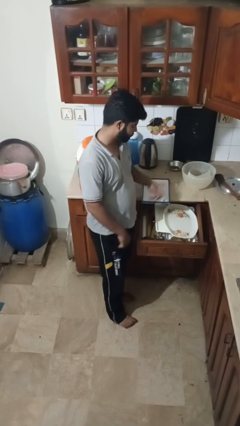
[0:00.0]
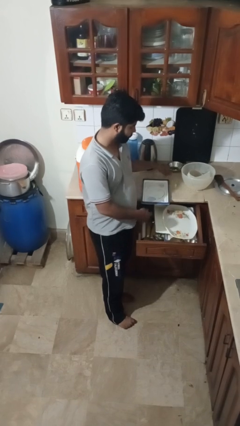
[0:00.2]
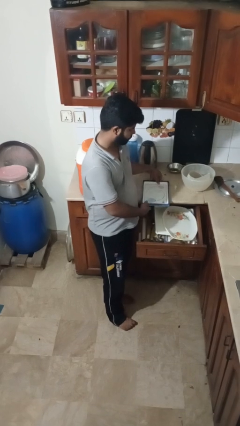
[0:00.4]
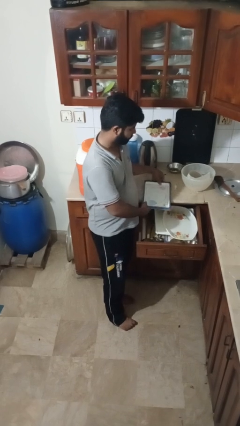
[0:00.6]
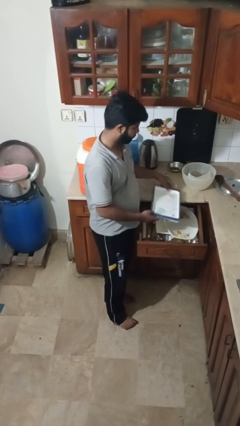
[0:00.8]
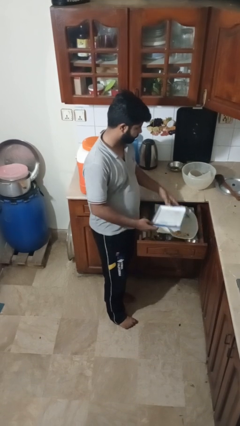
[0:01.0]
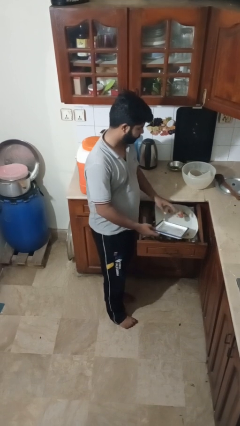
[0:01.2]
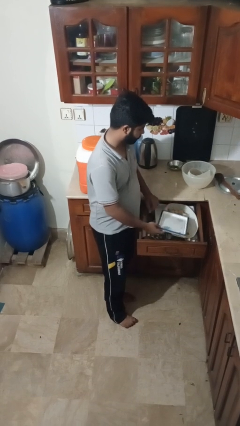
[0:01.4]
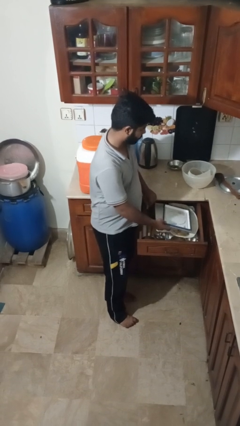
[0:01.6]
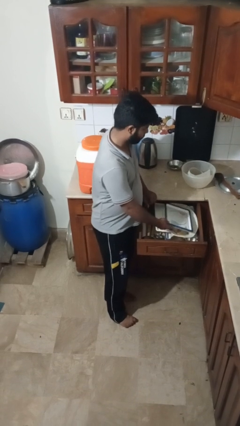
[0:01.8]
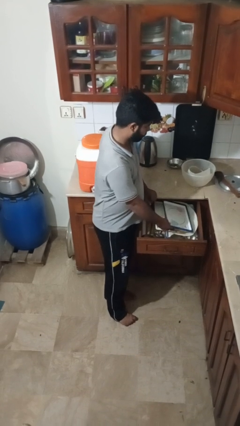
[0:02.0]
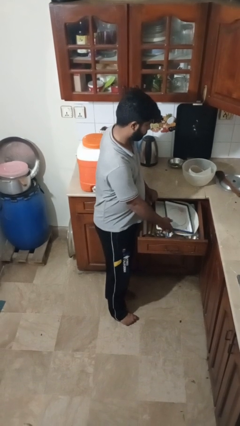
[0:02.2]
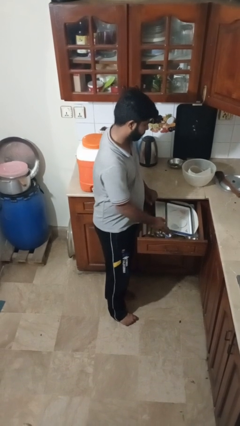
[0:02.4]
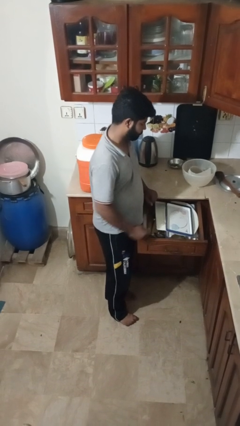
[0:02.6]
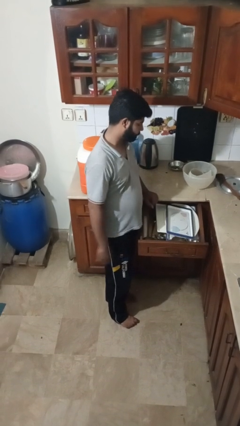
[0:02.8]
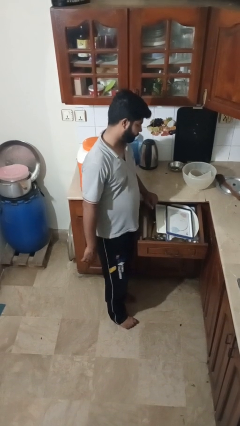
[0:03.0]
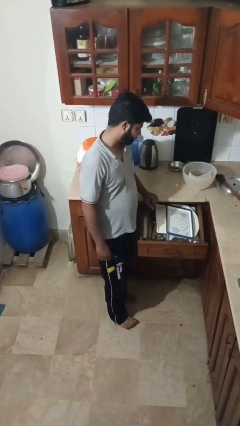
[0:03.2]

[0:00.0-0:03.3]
person puts object into kitchen drawer

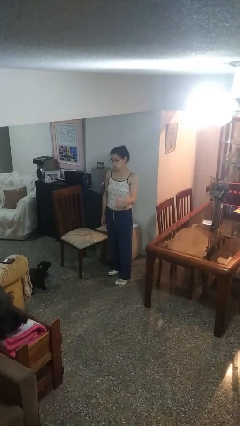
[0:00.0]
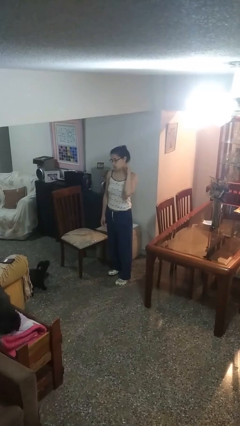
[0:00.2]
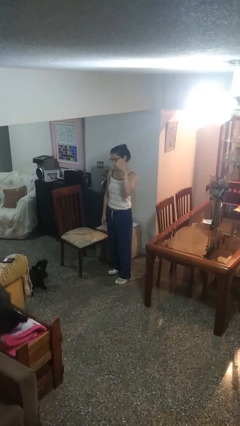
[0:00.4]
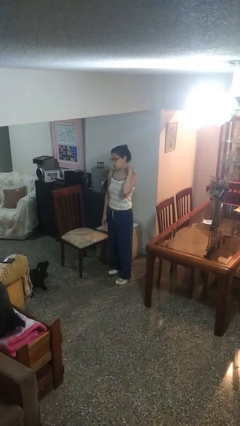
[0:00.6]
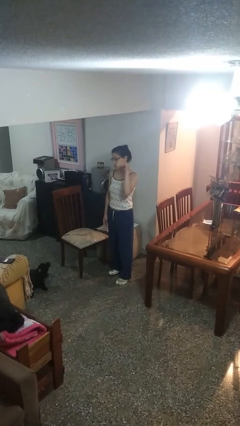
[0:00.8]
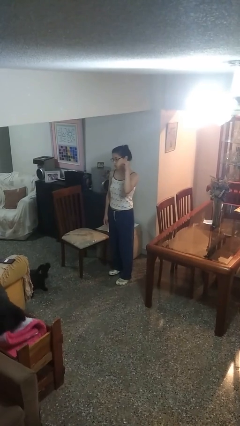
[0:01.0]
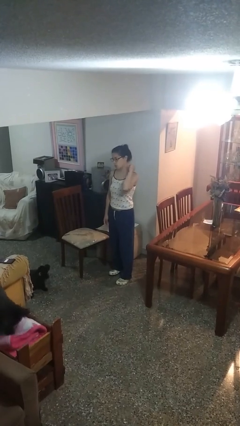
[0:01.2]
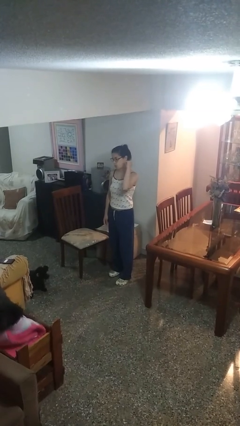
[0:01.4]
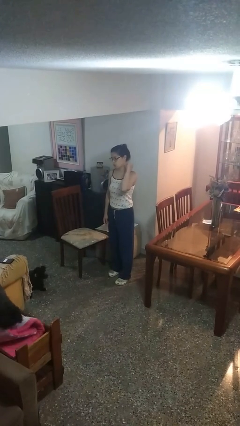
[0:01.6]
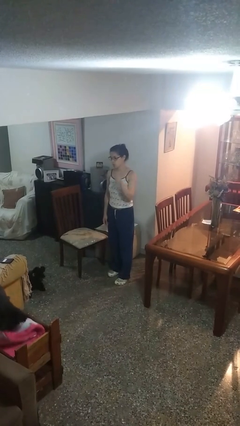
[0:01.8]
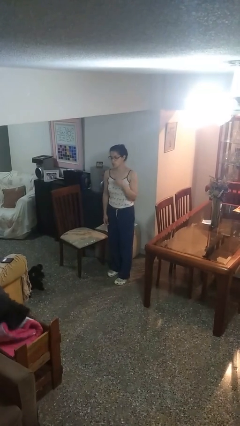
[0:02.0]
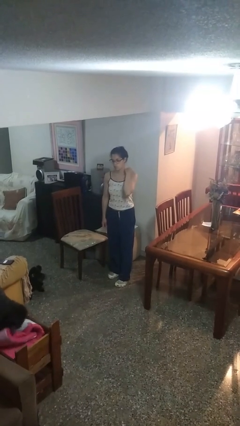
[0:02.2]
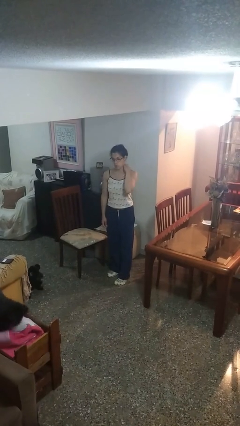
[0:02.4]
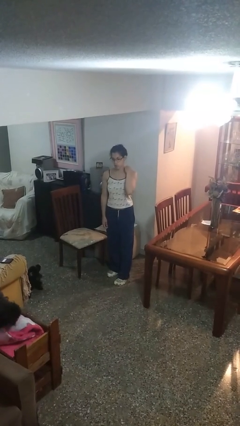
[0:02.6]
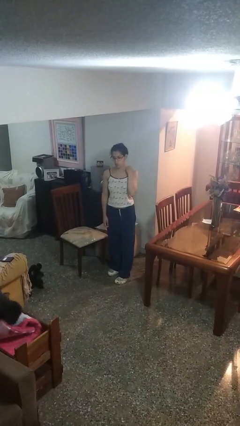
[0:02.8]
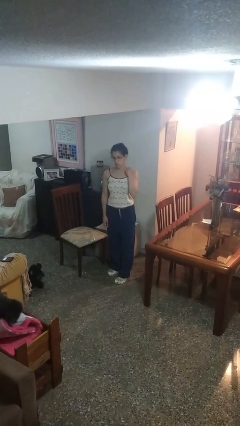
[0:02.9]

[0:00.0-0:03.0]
person gestures behind me

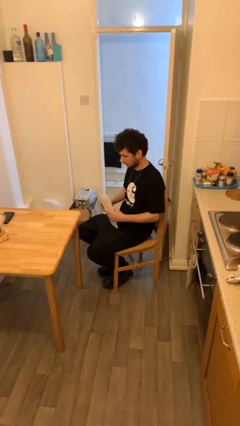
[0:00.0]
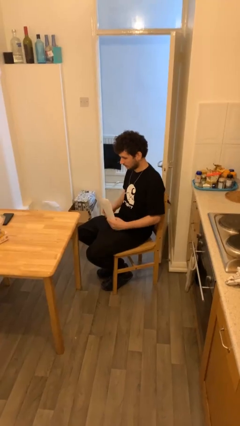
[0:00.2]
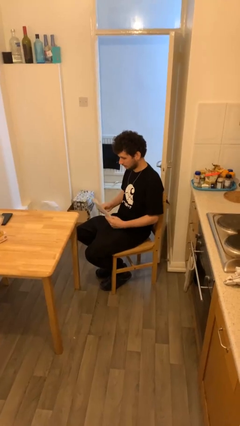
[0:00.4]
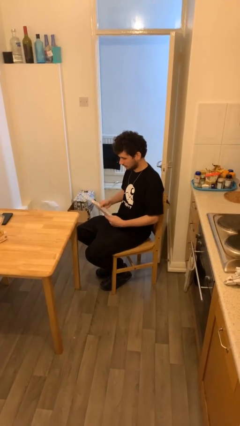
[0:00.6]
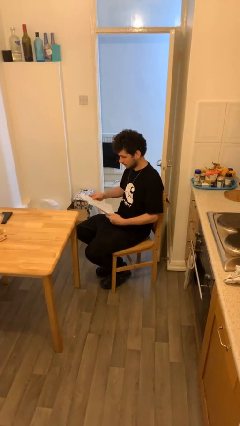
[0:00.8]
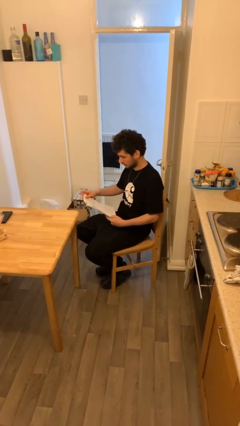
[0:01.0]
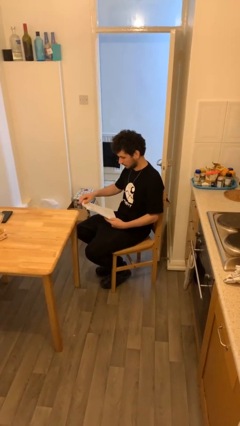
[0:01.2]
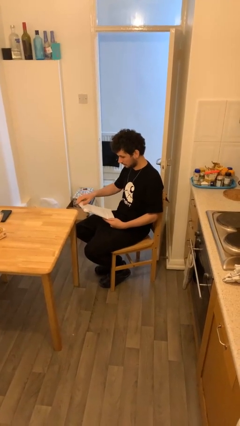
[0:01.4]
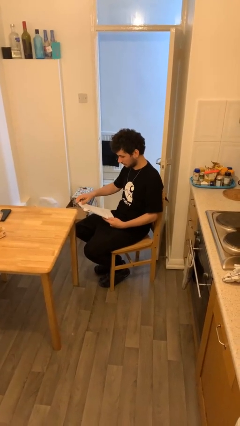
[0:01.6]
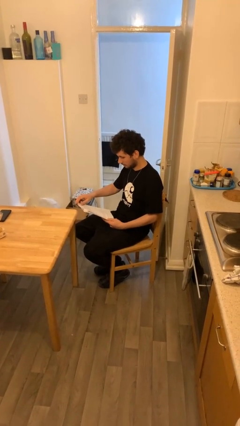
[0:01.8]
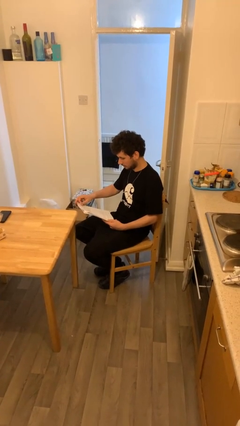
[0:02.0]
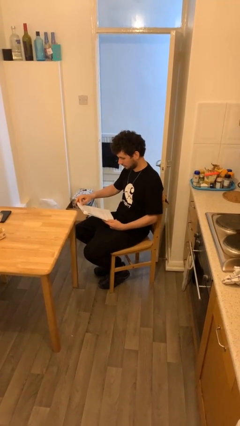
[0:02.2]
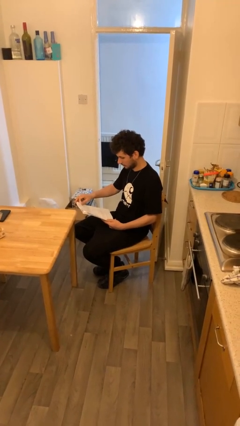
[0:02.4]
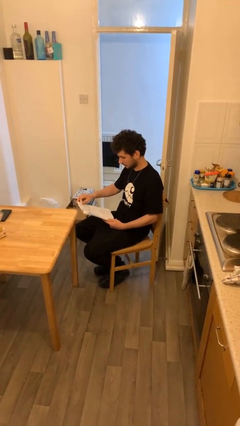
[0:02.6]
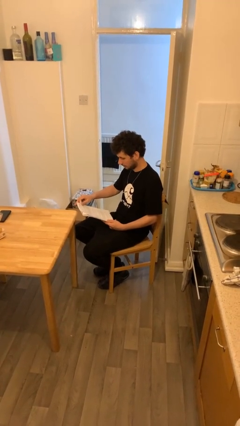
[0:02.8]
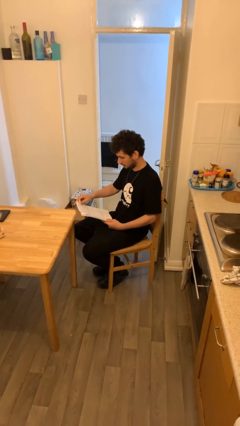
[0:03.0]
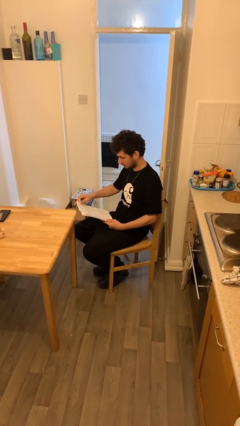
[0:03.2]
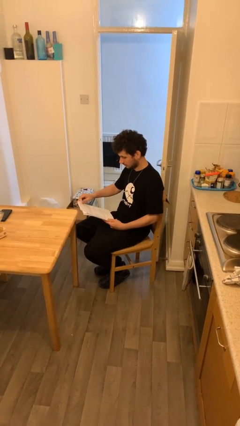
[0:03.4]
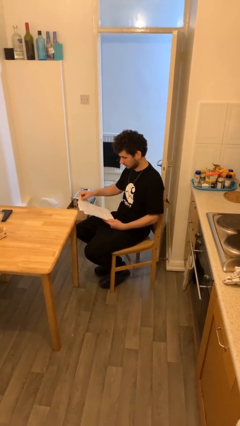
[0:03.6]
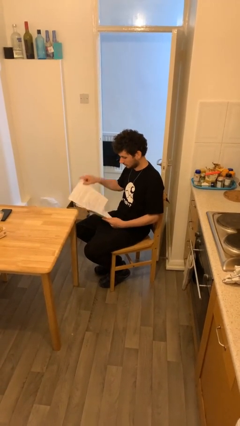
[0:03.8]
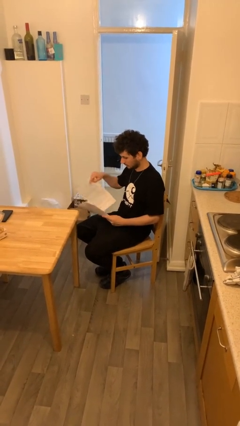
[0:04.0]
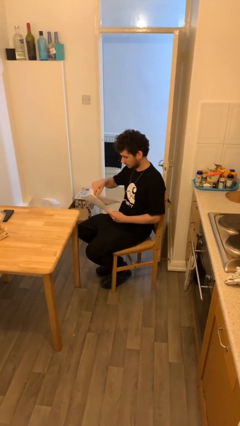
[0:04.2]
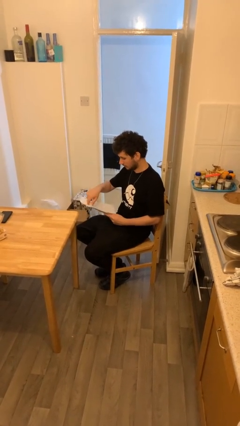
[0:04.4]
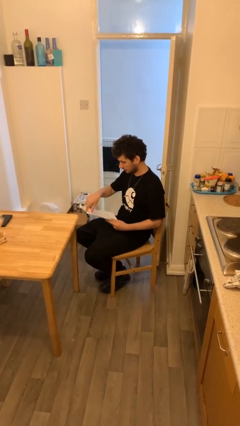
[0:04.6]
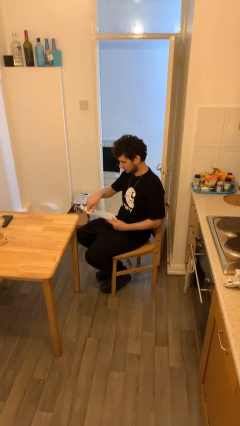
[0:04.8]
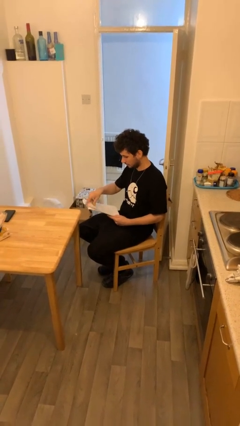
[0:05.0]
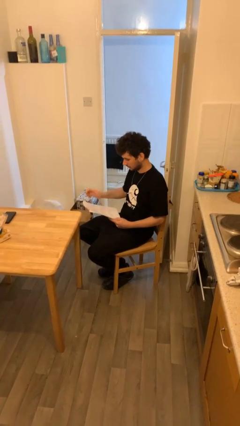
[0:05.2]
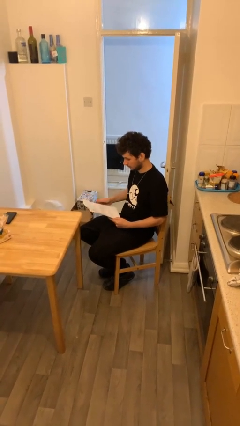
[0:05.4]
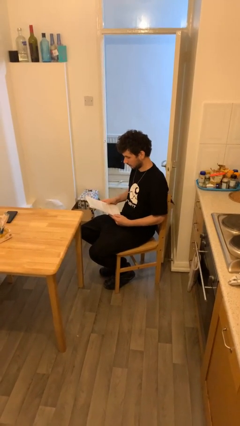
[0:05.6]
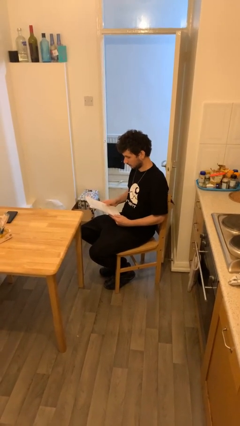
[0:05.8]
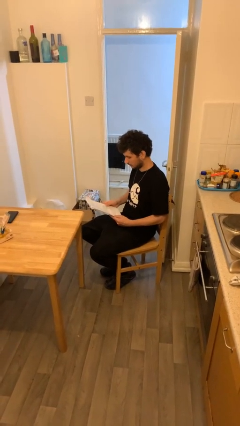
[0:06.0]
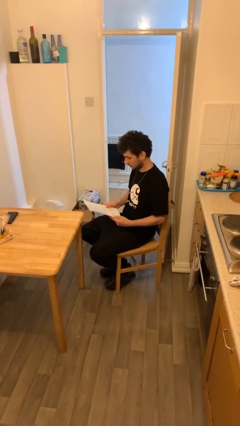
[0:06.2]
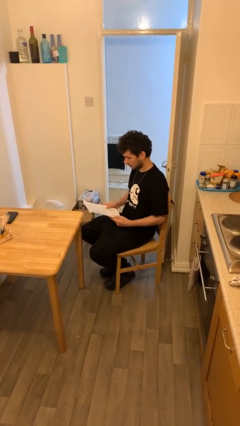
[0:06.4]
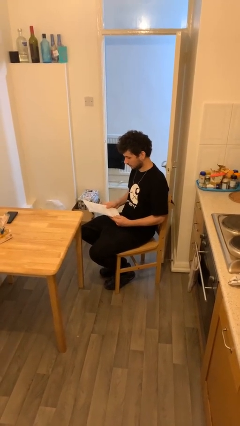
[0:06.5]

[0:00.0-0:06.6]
person reads document

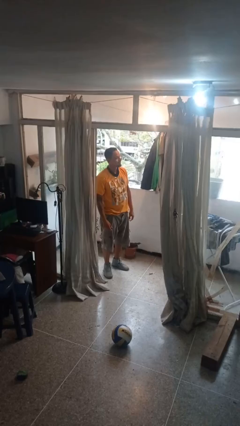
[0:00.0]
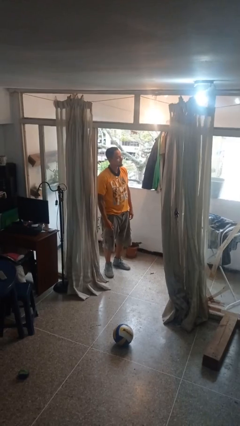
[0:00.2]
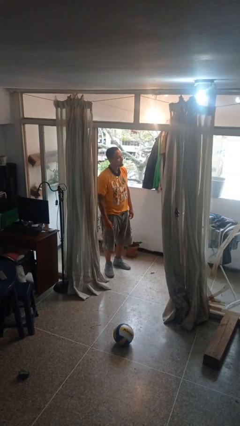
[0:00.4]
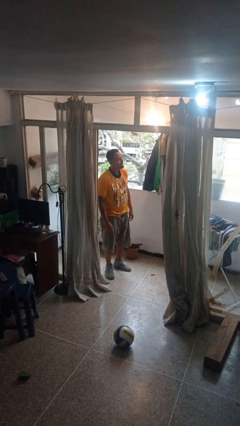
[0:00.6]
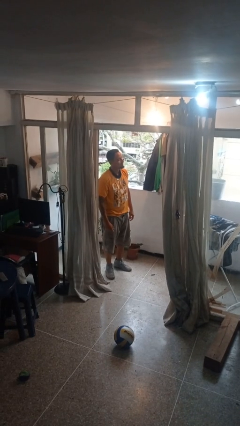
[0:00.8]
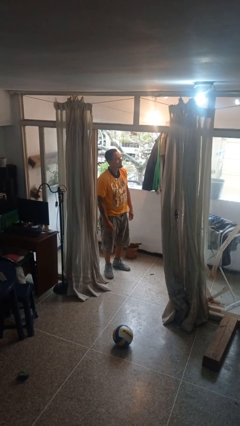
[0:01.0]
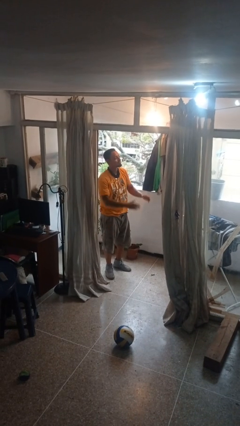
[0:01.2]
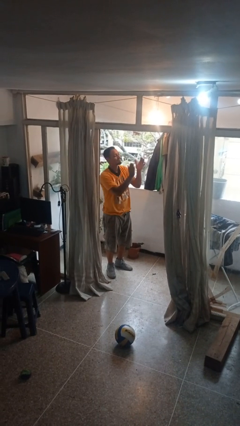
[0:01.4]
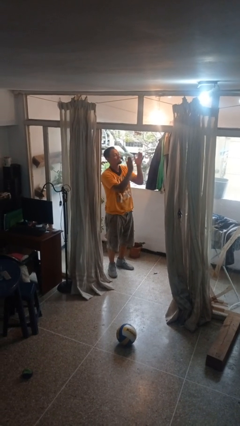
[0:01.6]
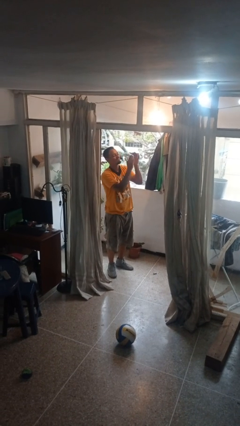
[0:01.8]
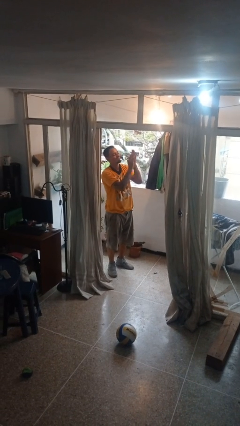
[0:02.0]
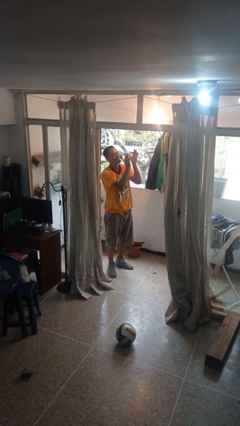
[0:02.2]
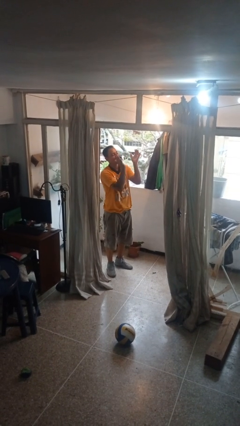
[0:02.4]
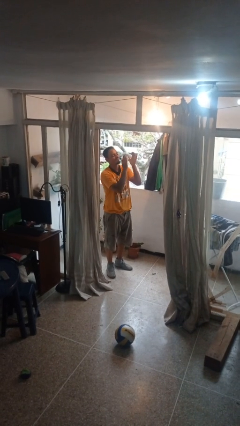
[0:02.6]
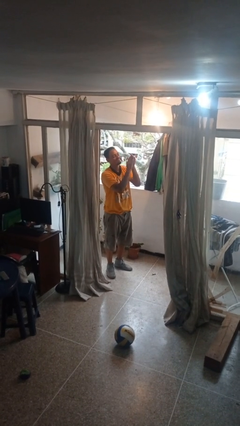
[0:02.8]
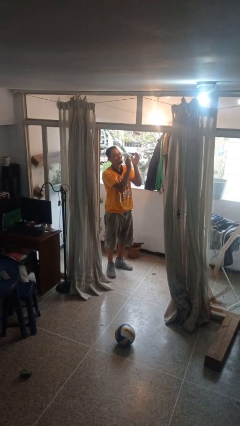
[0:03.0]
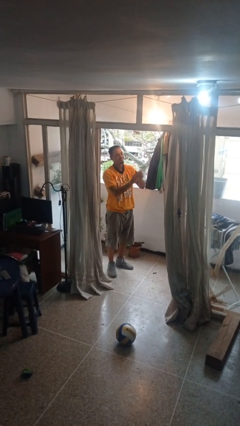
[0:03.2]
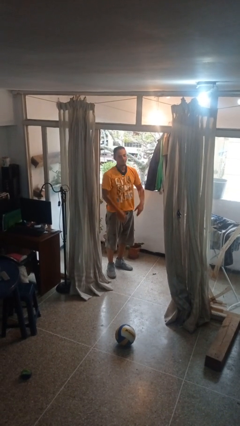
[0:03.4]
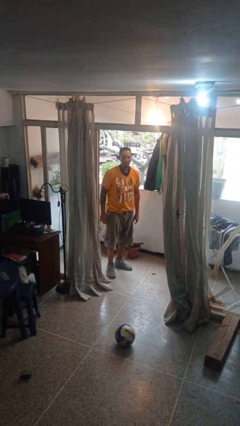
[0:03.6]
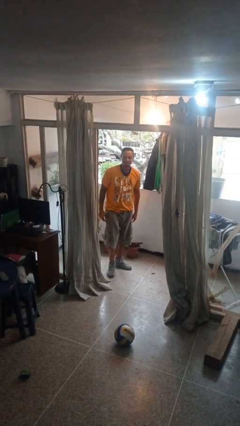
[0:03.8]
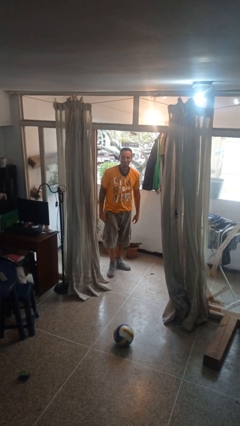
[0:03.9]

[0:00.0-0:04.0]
person claps hands

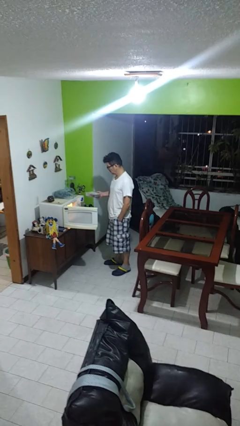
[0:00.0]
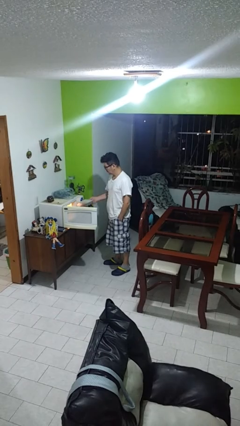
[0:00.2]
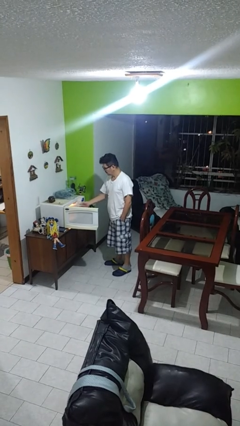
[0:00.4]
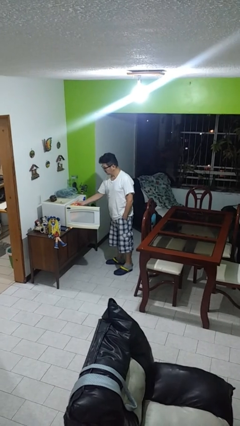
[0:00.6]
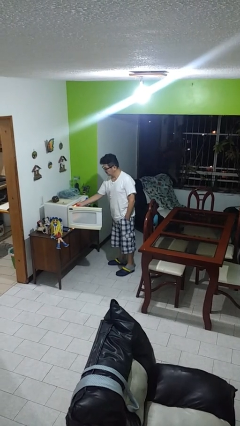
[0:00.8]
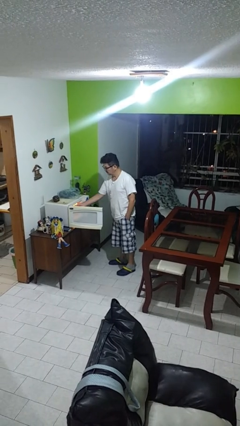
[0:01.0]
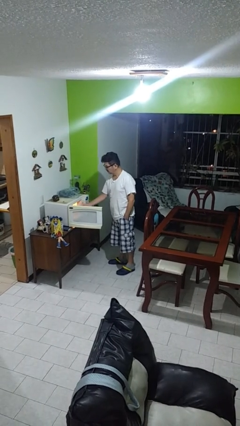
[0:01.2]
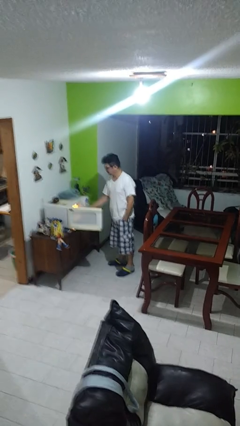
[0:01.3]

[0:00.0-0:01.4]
person puts object into microwave
